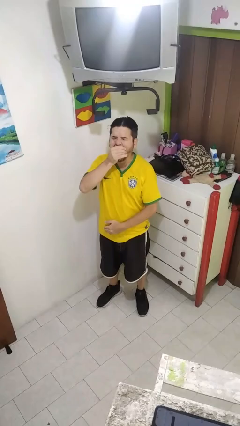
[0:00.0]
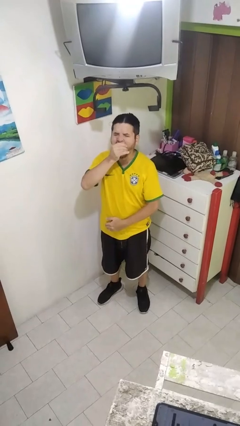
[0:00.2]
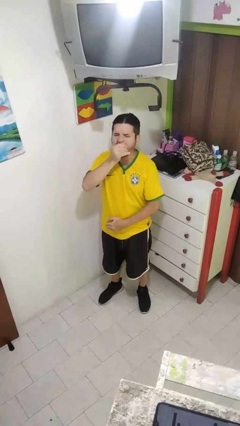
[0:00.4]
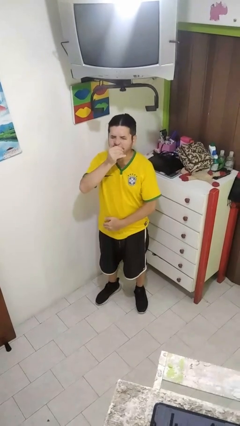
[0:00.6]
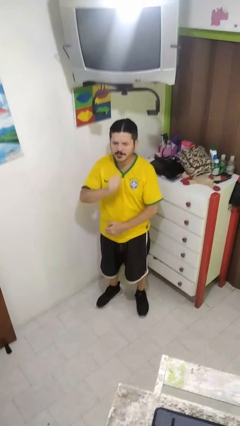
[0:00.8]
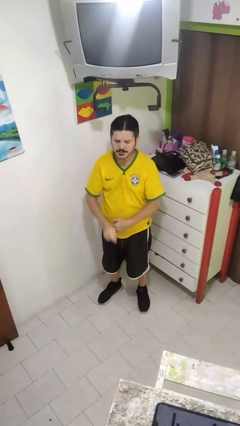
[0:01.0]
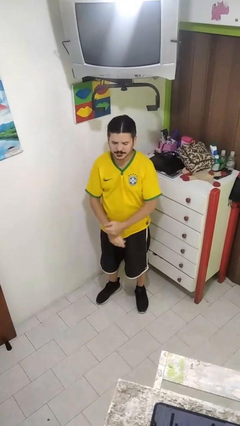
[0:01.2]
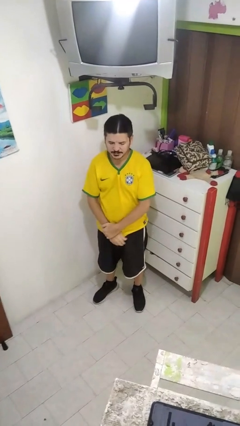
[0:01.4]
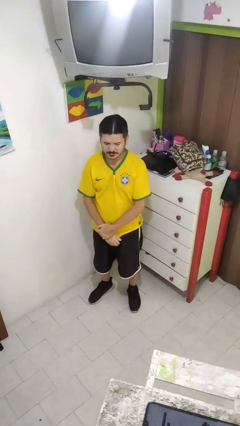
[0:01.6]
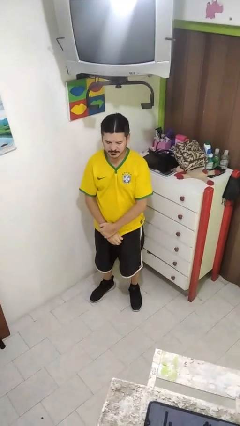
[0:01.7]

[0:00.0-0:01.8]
person yawns

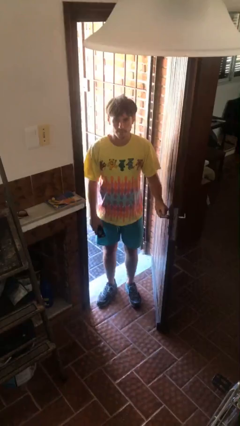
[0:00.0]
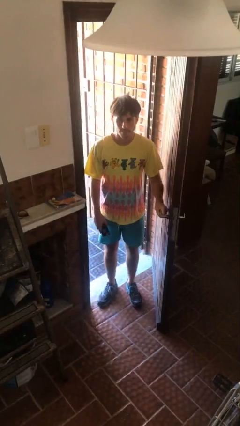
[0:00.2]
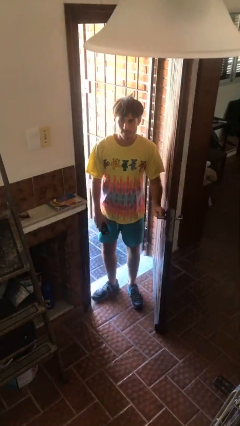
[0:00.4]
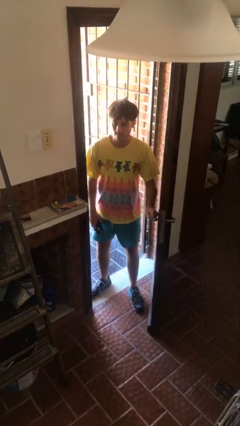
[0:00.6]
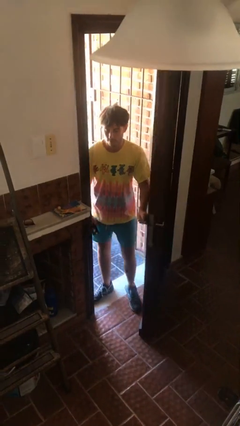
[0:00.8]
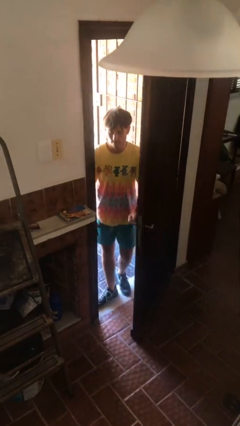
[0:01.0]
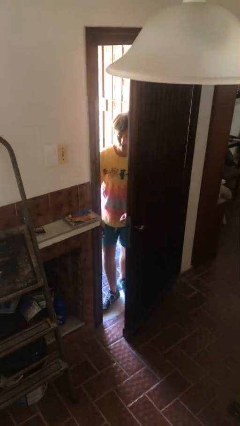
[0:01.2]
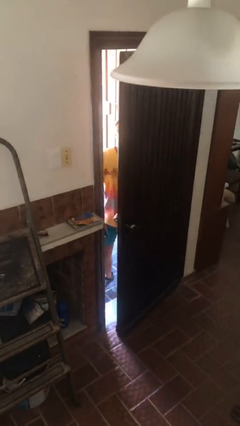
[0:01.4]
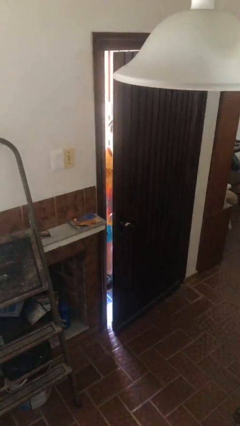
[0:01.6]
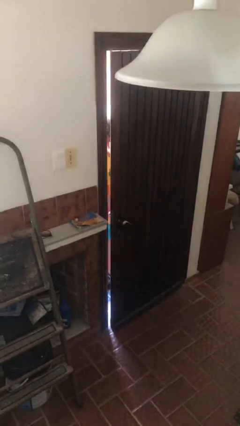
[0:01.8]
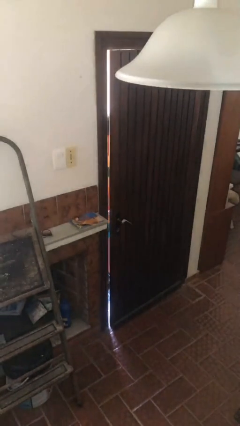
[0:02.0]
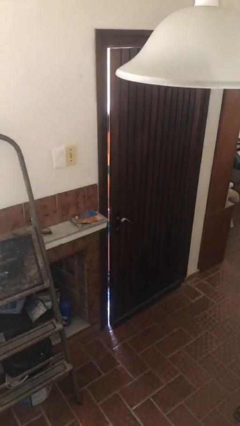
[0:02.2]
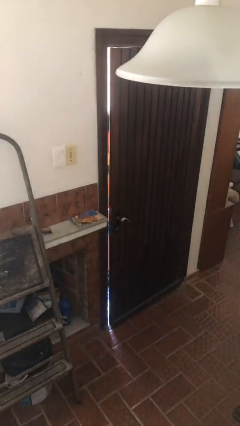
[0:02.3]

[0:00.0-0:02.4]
person closes facility door

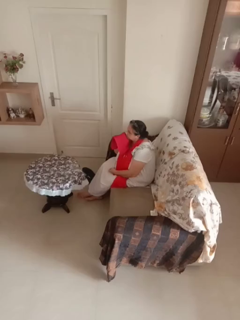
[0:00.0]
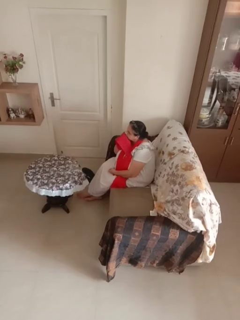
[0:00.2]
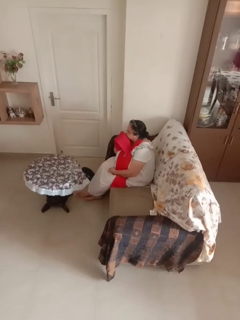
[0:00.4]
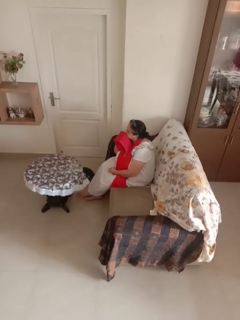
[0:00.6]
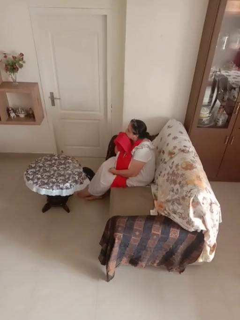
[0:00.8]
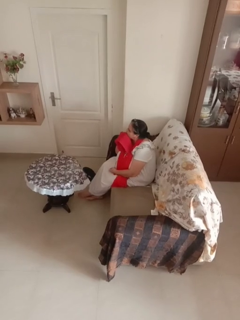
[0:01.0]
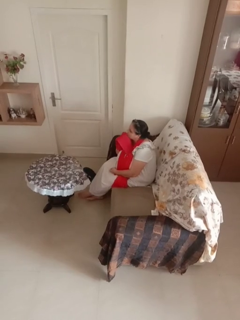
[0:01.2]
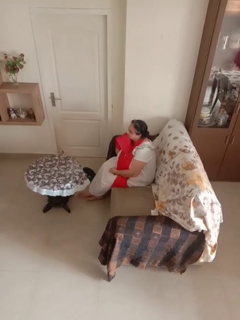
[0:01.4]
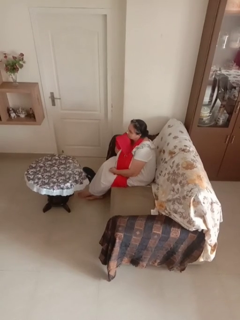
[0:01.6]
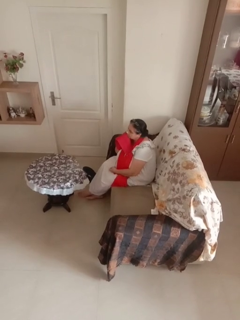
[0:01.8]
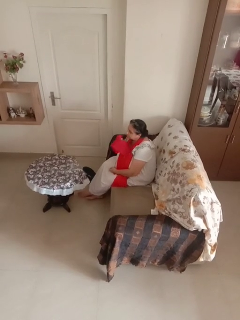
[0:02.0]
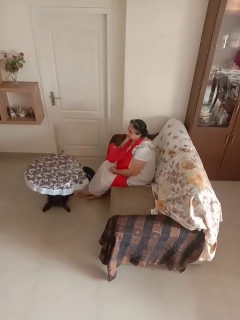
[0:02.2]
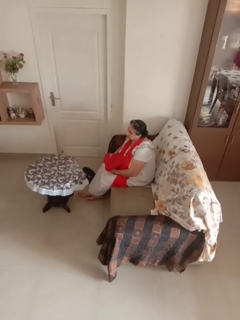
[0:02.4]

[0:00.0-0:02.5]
person wipes mouth with napkin

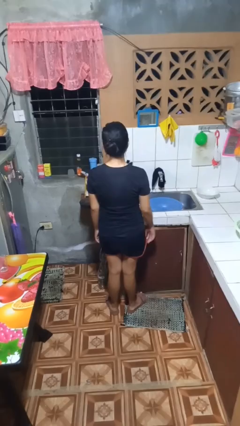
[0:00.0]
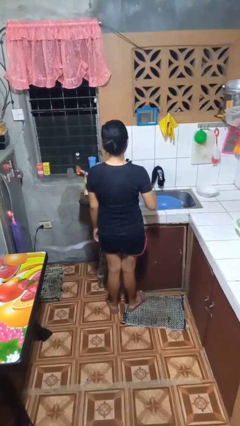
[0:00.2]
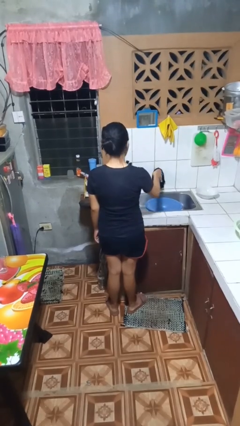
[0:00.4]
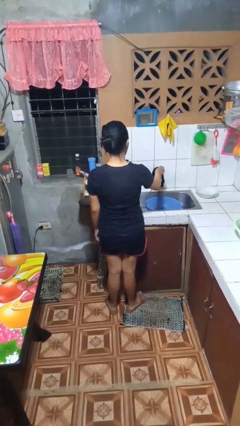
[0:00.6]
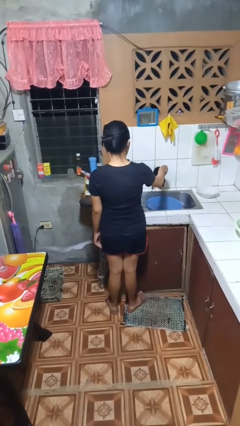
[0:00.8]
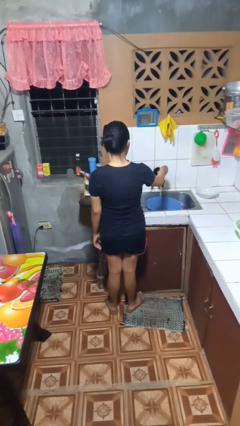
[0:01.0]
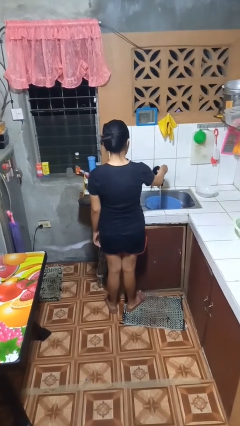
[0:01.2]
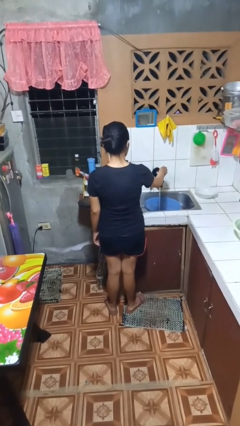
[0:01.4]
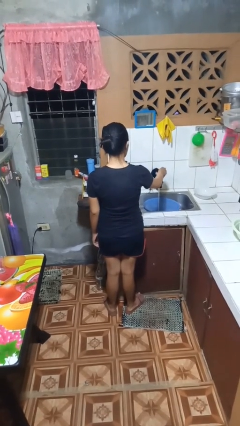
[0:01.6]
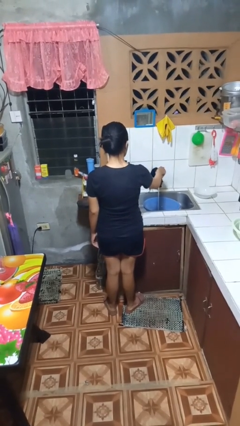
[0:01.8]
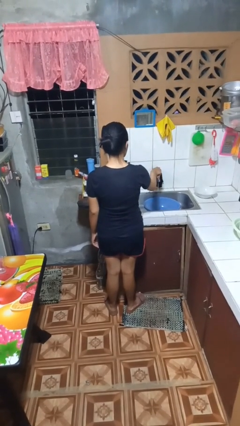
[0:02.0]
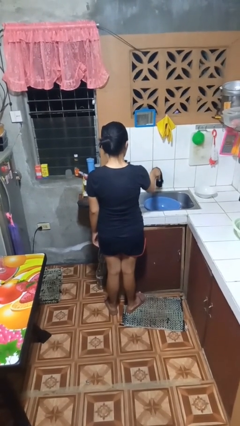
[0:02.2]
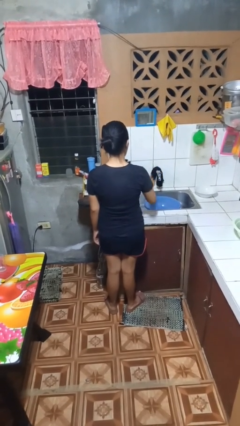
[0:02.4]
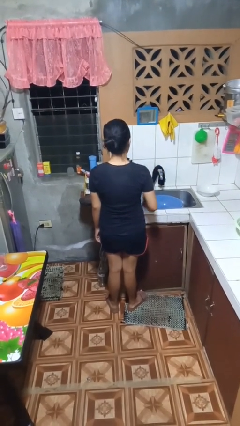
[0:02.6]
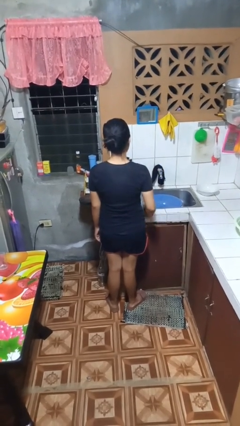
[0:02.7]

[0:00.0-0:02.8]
person turns on faucet

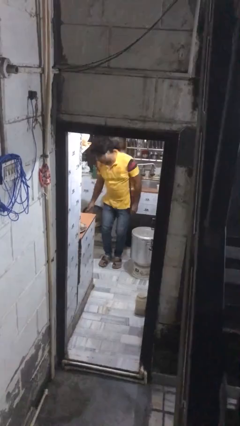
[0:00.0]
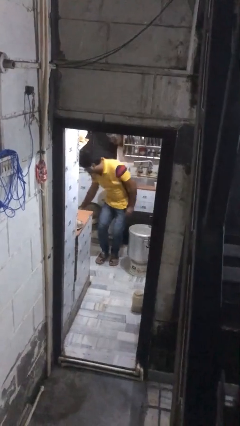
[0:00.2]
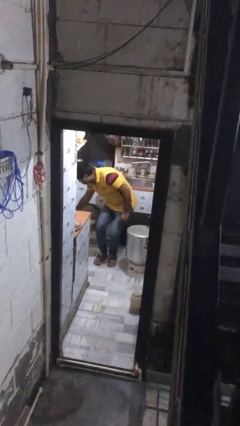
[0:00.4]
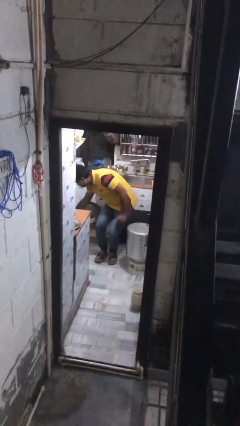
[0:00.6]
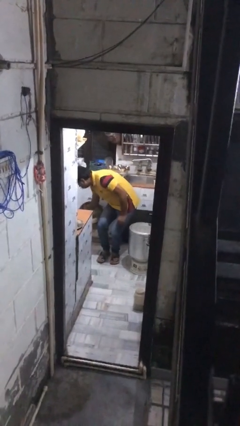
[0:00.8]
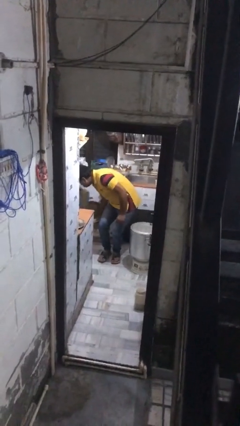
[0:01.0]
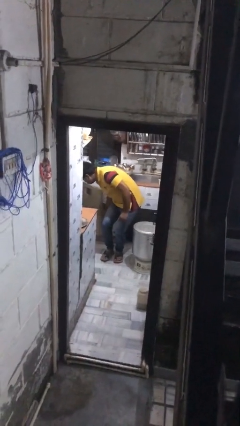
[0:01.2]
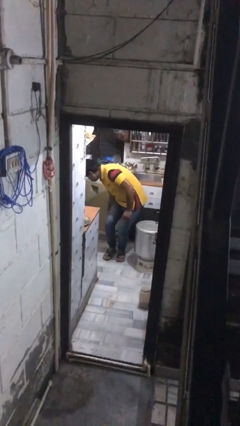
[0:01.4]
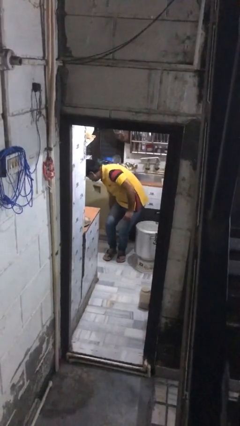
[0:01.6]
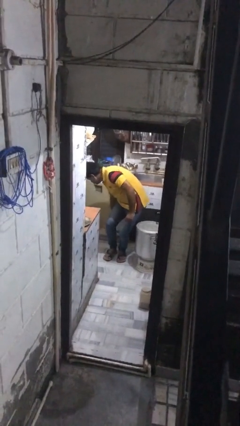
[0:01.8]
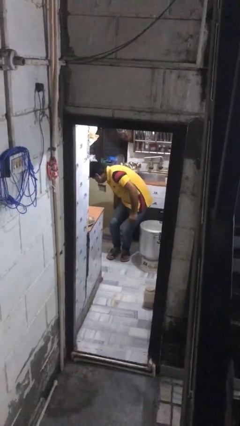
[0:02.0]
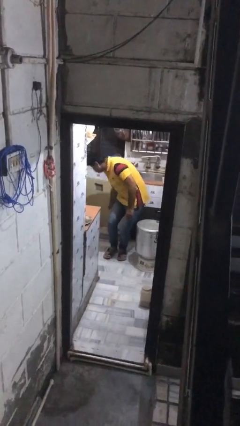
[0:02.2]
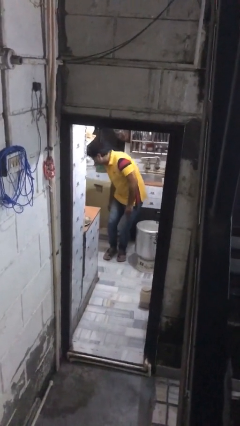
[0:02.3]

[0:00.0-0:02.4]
person opens kitchen drawer

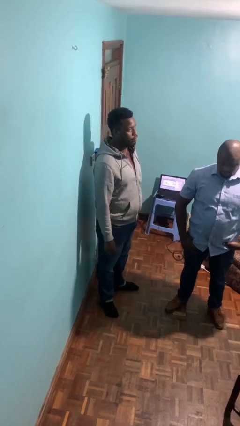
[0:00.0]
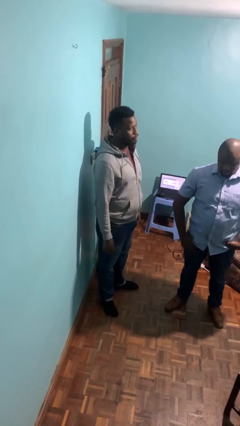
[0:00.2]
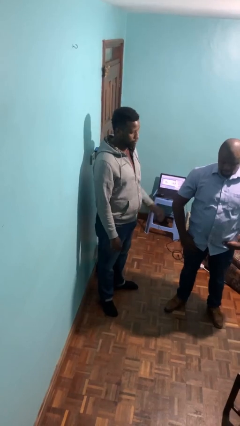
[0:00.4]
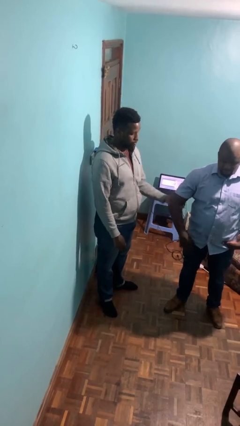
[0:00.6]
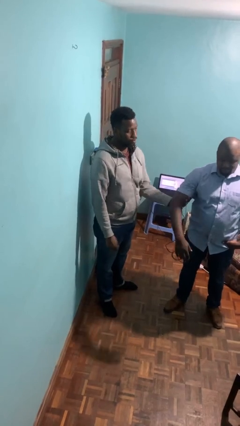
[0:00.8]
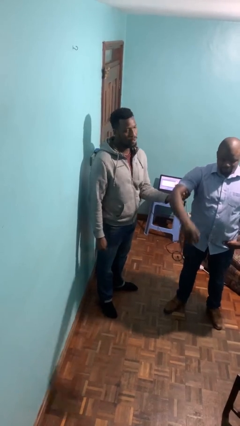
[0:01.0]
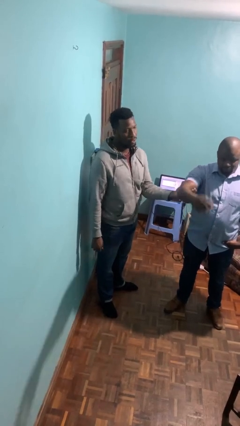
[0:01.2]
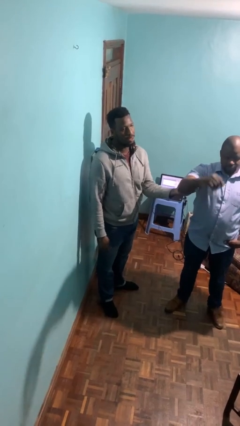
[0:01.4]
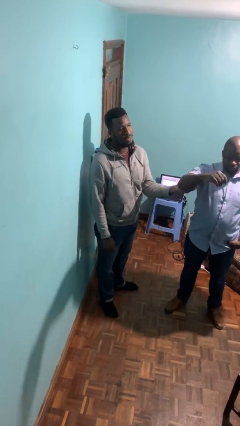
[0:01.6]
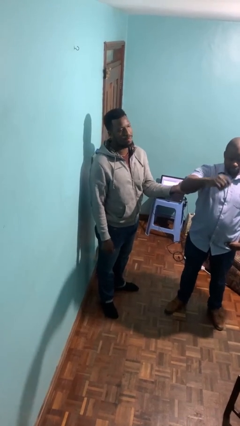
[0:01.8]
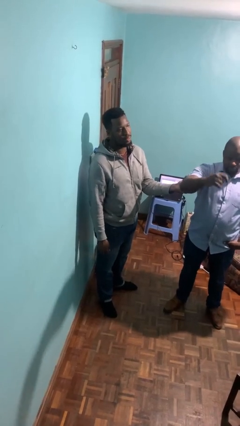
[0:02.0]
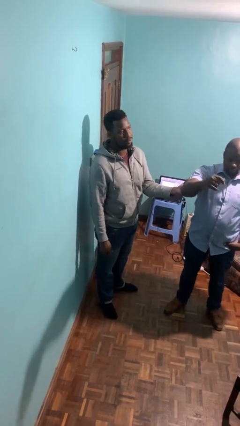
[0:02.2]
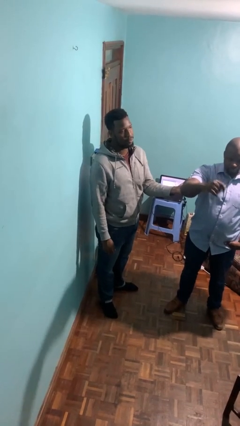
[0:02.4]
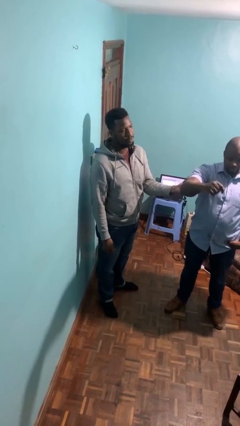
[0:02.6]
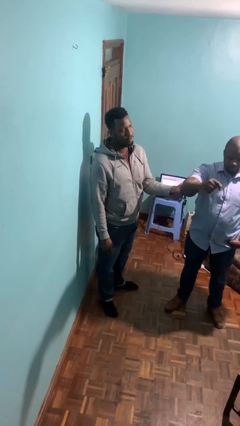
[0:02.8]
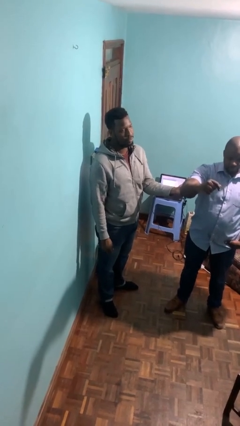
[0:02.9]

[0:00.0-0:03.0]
person grabs person by bicep

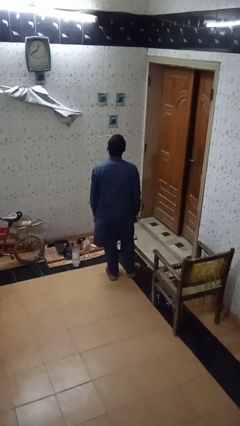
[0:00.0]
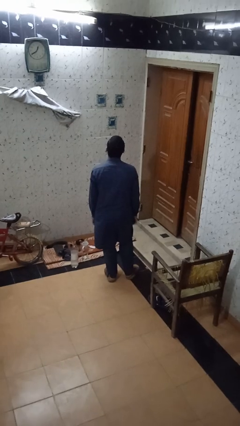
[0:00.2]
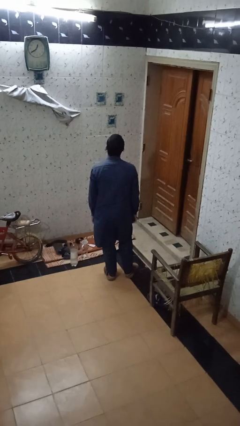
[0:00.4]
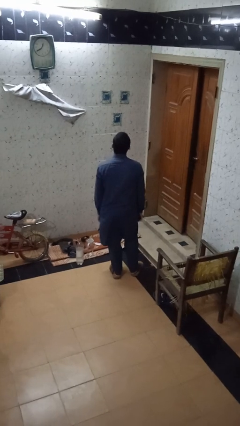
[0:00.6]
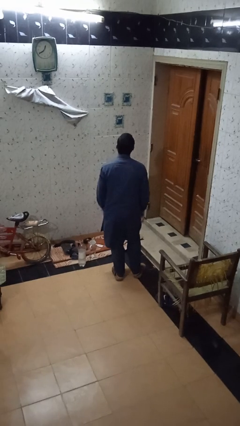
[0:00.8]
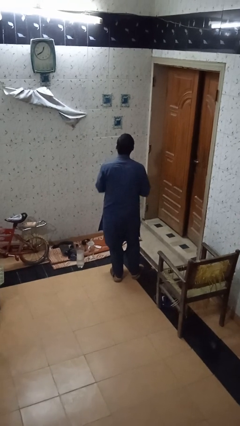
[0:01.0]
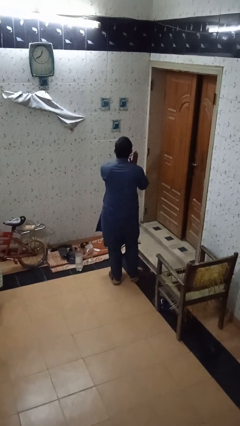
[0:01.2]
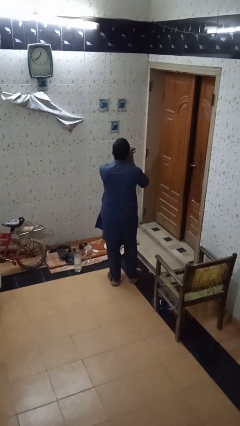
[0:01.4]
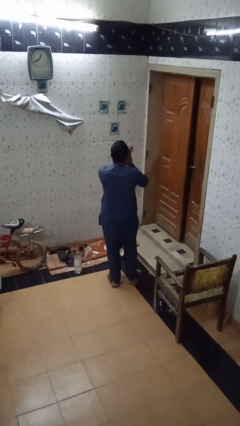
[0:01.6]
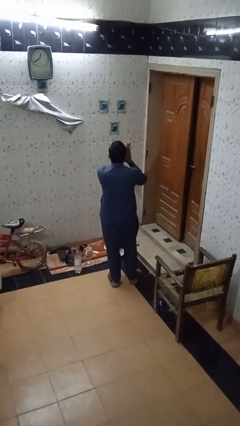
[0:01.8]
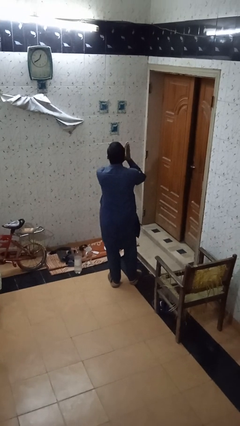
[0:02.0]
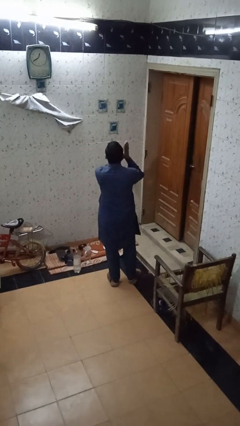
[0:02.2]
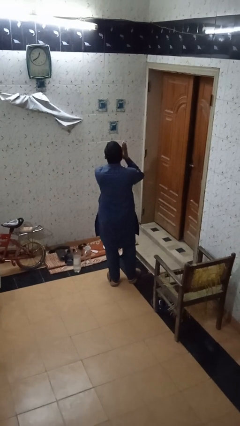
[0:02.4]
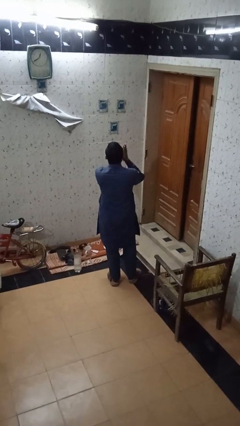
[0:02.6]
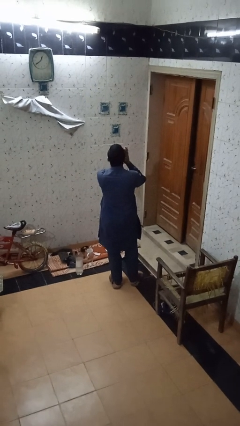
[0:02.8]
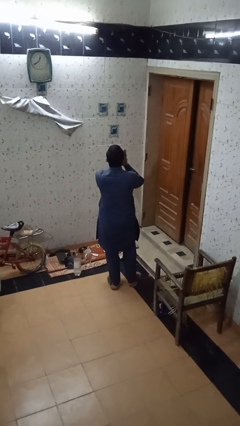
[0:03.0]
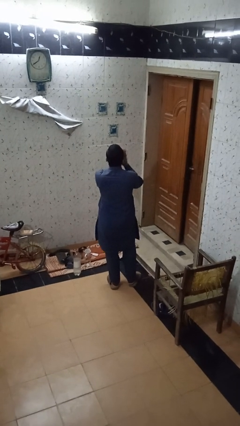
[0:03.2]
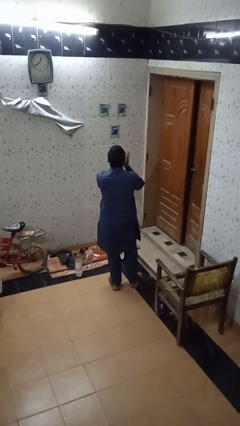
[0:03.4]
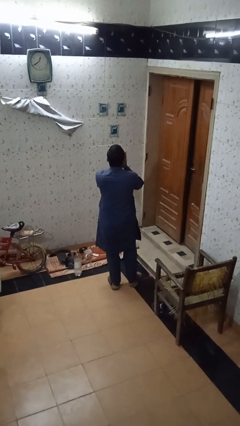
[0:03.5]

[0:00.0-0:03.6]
person claps hands
